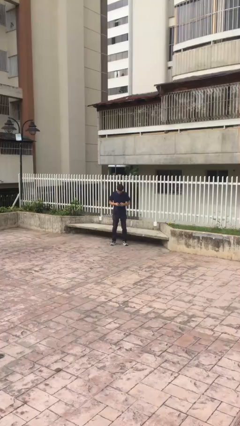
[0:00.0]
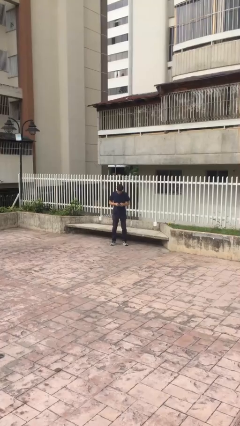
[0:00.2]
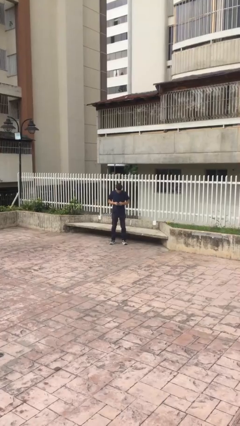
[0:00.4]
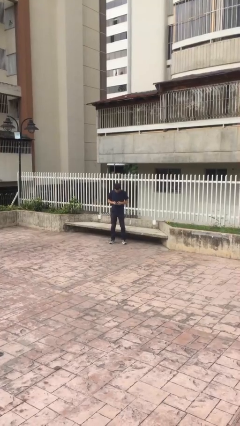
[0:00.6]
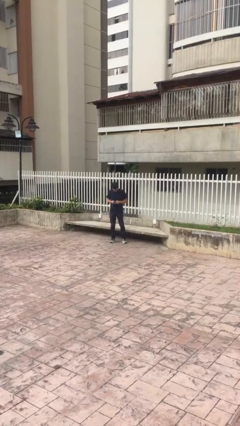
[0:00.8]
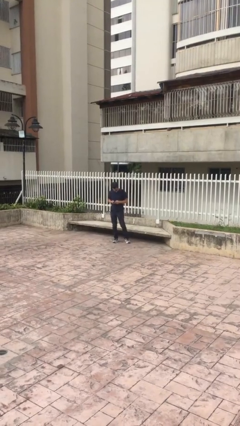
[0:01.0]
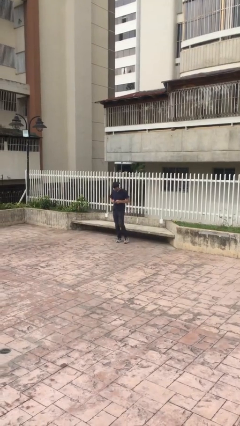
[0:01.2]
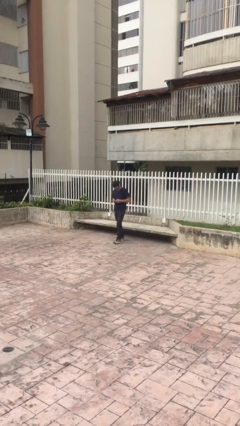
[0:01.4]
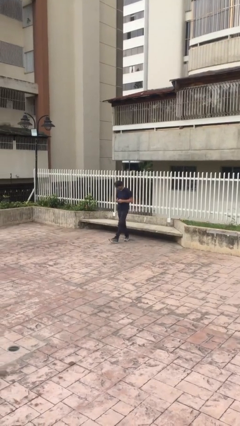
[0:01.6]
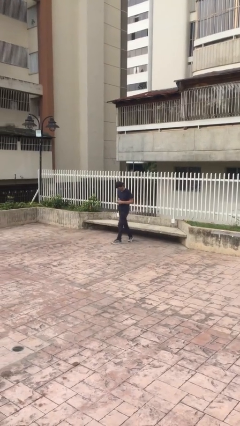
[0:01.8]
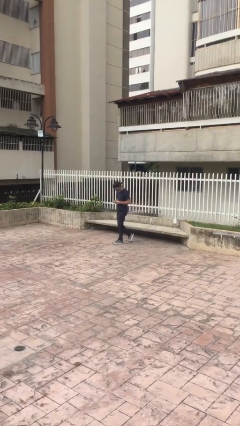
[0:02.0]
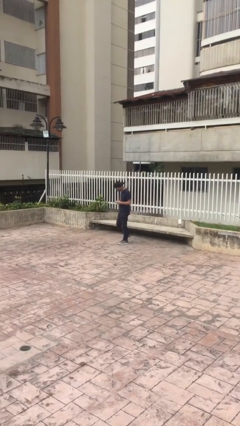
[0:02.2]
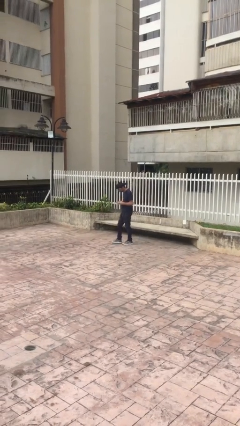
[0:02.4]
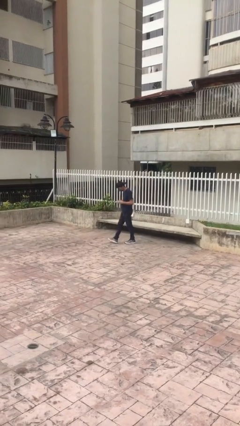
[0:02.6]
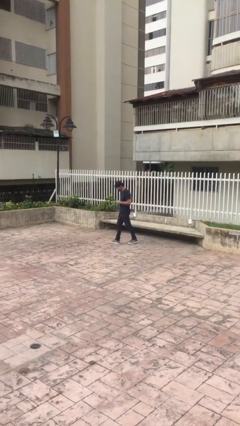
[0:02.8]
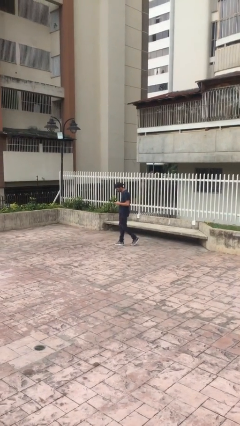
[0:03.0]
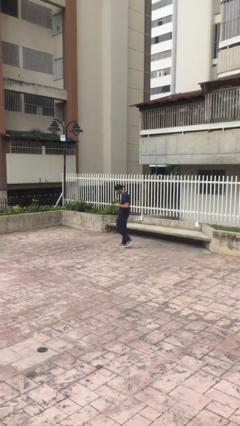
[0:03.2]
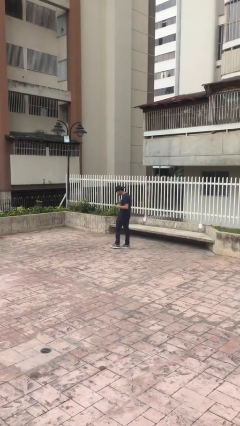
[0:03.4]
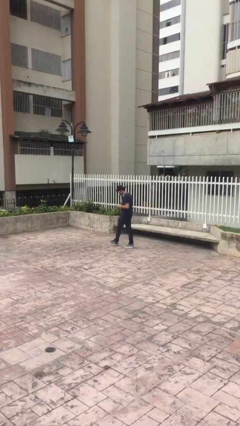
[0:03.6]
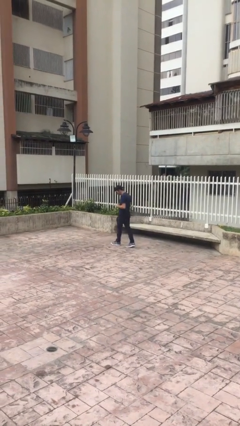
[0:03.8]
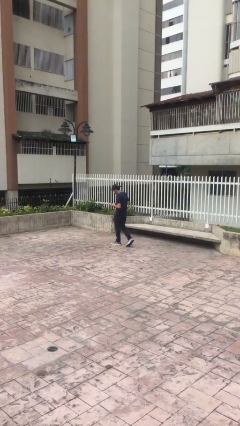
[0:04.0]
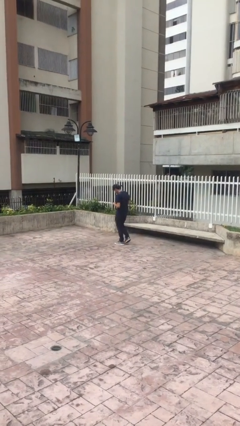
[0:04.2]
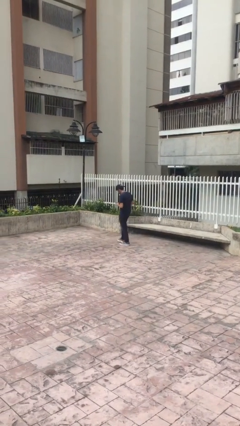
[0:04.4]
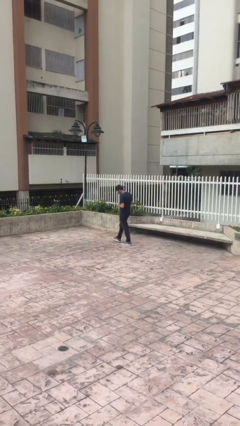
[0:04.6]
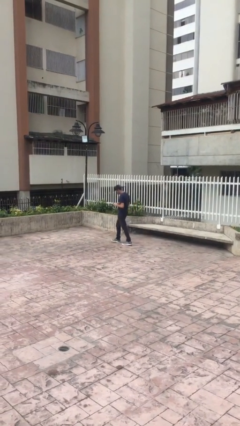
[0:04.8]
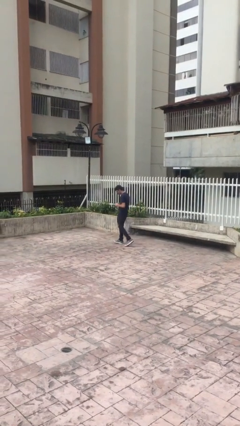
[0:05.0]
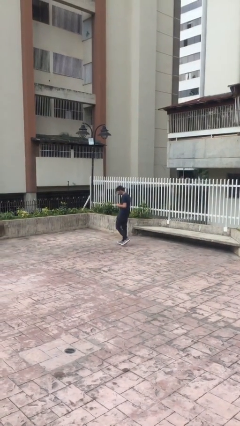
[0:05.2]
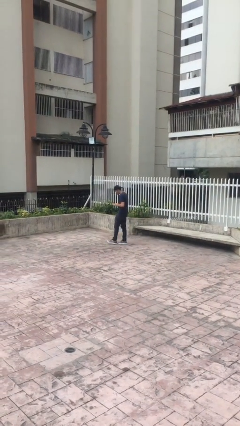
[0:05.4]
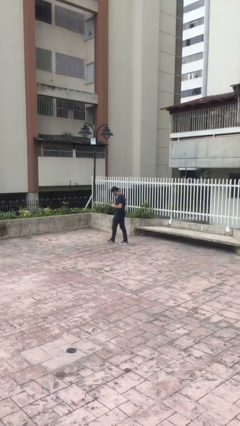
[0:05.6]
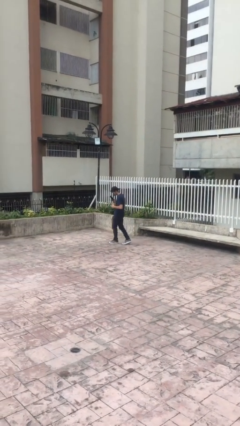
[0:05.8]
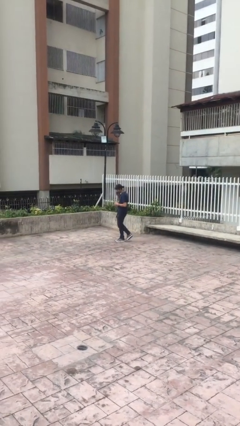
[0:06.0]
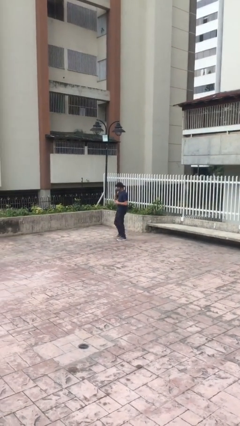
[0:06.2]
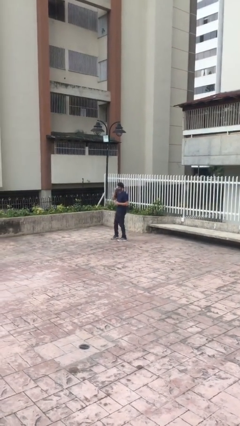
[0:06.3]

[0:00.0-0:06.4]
person texts on phone

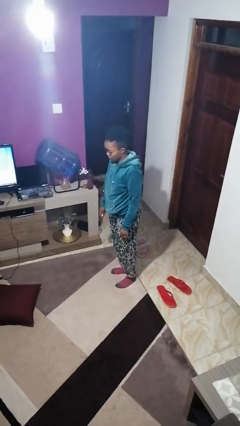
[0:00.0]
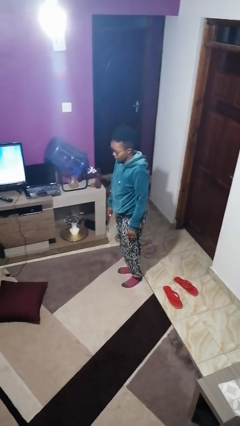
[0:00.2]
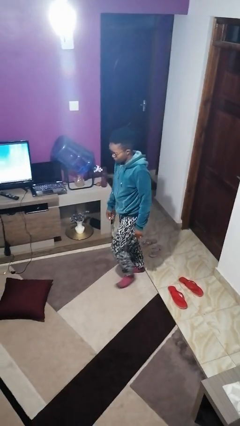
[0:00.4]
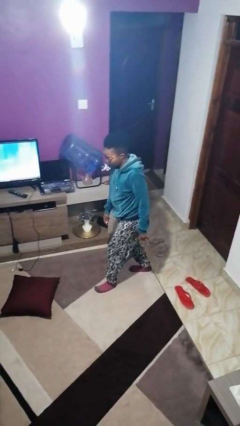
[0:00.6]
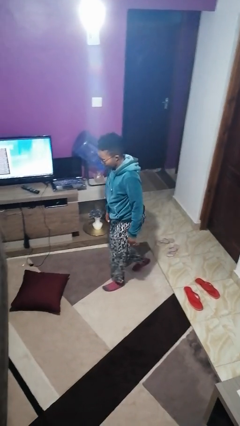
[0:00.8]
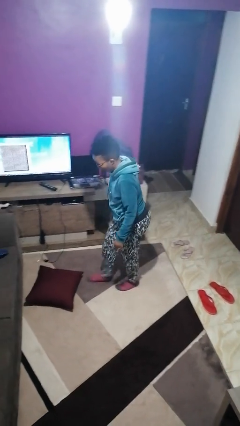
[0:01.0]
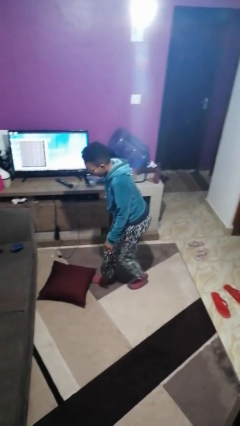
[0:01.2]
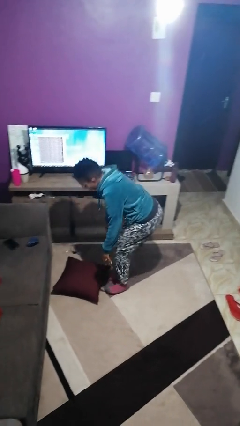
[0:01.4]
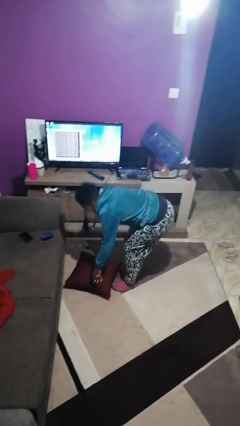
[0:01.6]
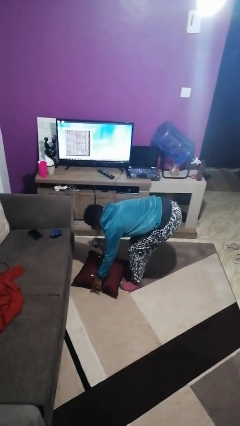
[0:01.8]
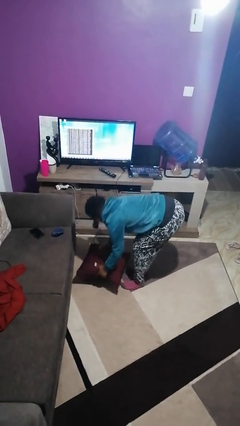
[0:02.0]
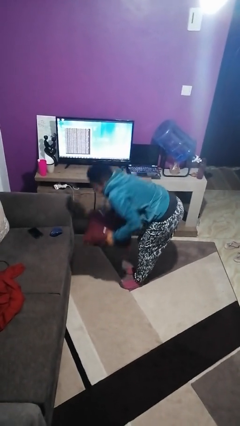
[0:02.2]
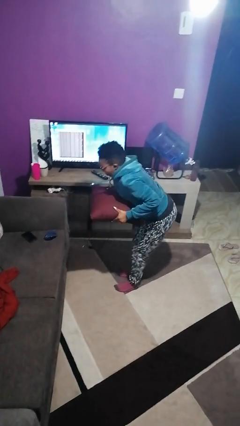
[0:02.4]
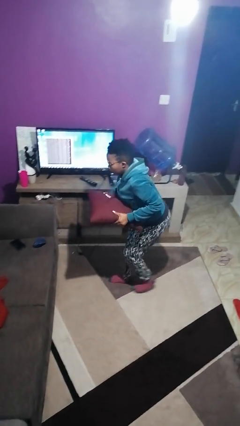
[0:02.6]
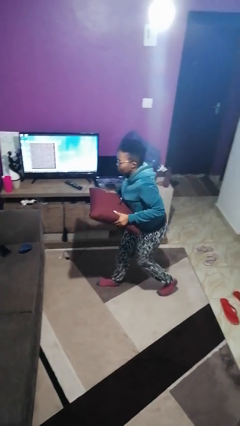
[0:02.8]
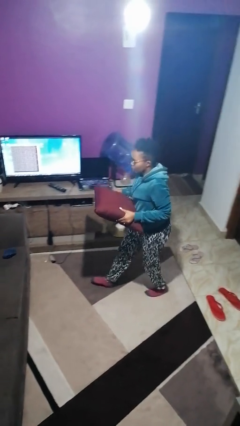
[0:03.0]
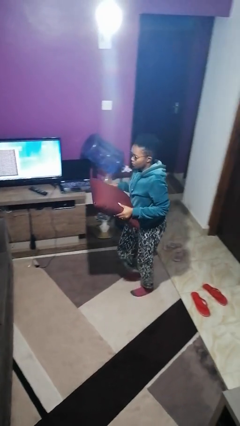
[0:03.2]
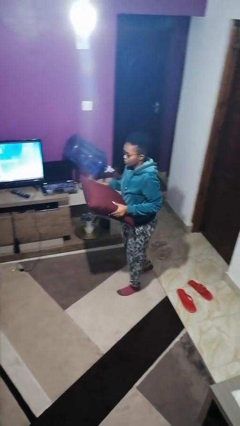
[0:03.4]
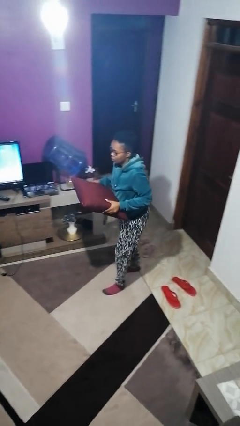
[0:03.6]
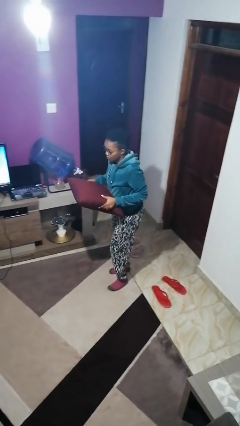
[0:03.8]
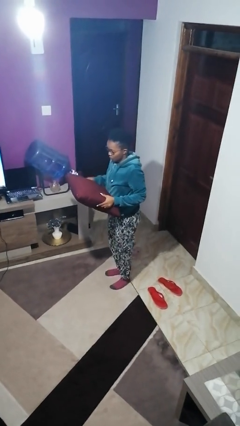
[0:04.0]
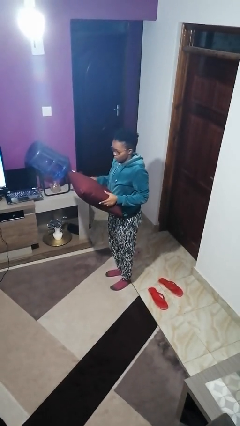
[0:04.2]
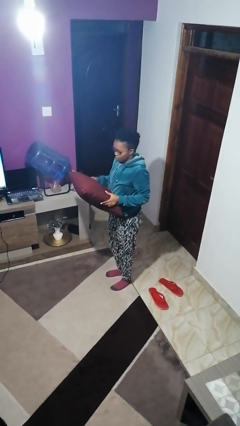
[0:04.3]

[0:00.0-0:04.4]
person picks up object from floor

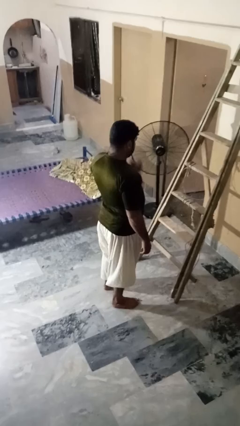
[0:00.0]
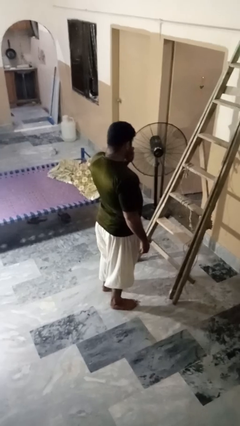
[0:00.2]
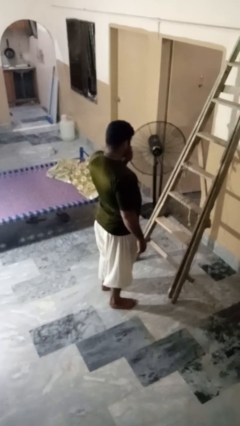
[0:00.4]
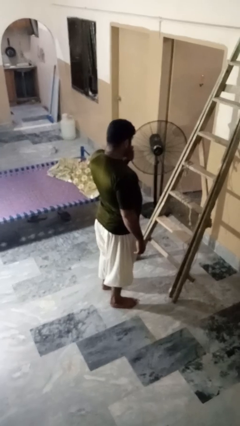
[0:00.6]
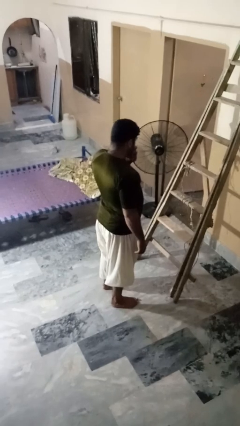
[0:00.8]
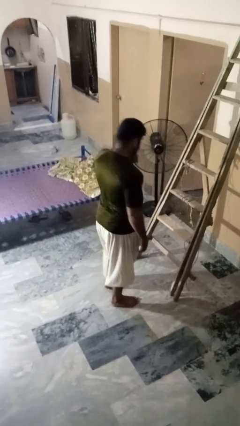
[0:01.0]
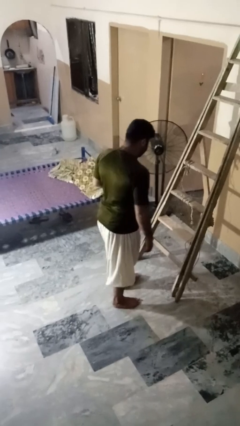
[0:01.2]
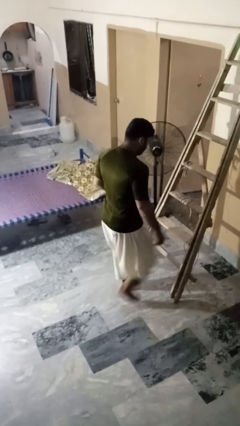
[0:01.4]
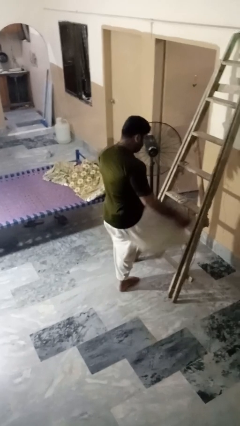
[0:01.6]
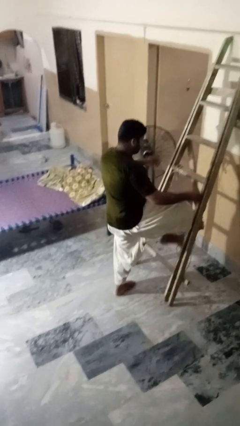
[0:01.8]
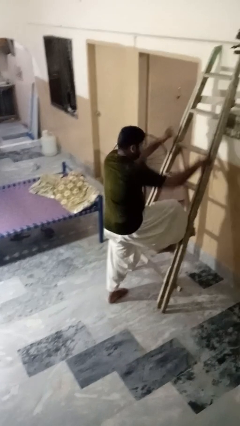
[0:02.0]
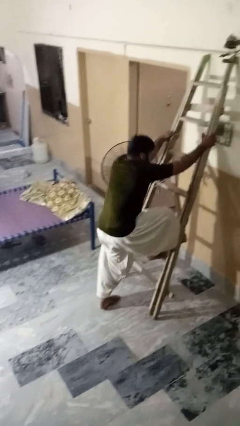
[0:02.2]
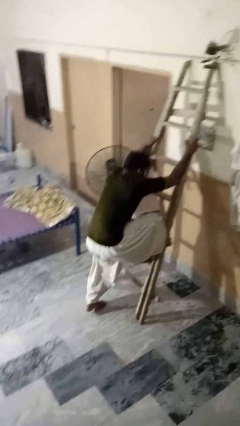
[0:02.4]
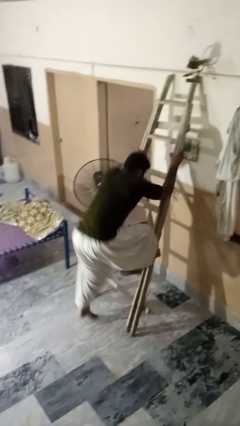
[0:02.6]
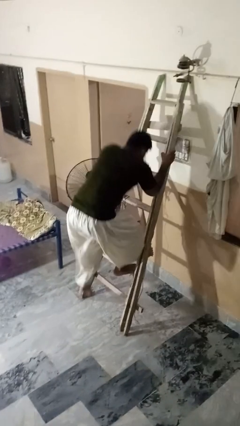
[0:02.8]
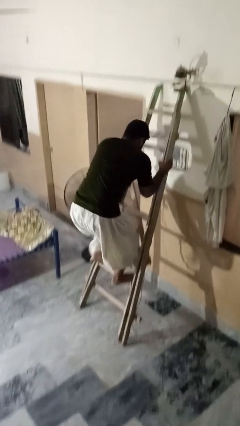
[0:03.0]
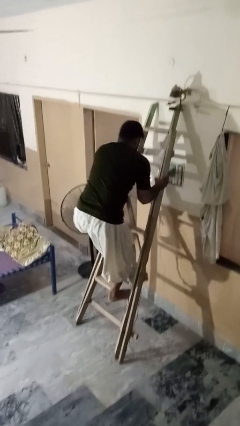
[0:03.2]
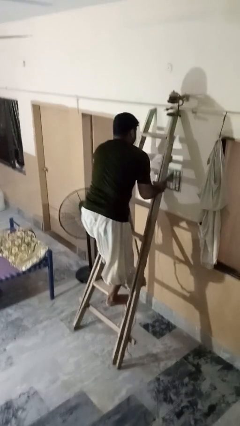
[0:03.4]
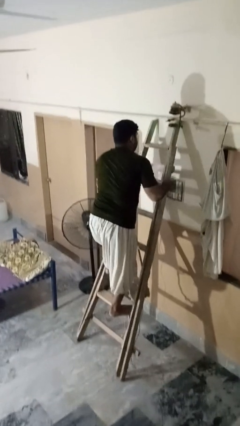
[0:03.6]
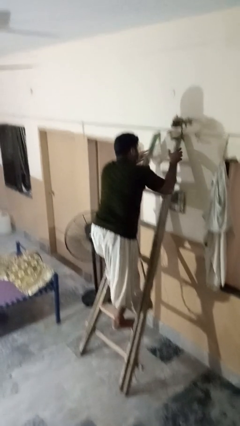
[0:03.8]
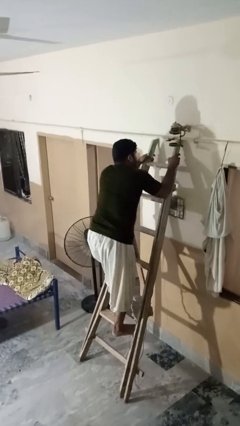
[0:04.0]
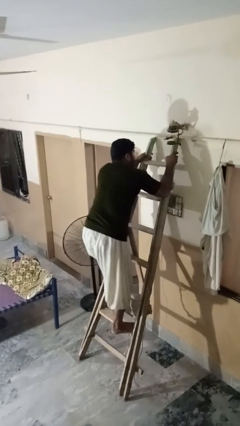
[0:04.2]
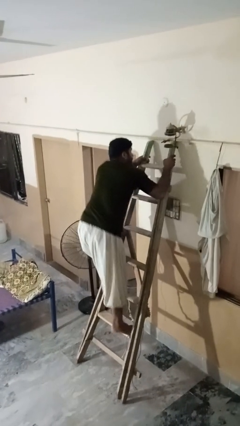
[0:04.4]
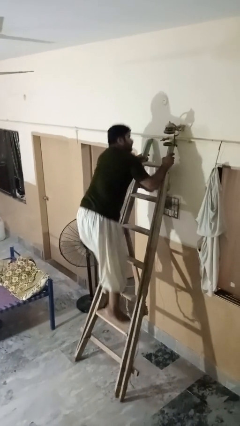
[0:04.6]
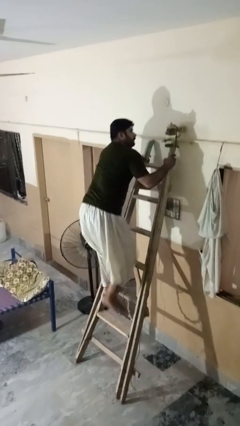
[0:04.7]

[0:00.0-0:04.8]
person climbs up ladder

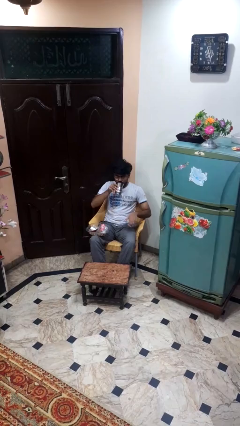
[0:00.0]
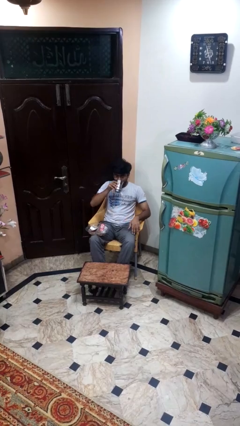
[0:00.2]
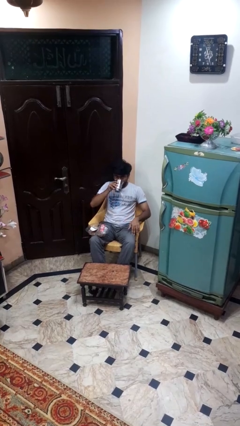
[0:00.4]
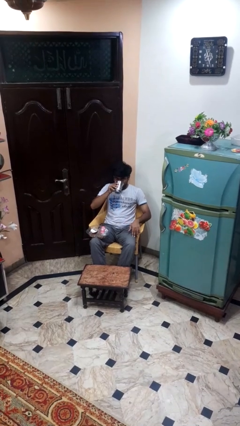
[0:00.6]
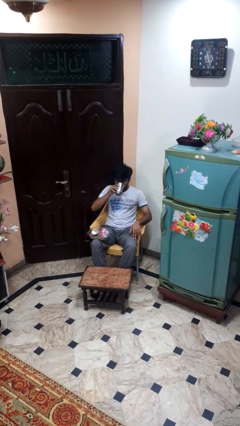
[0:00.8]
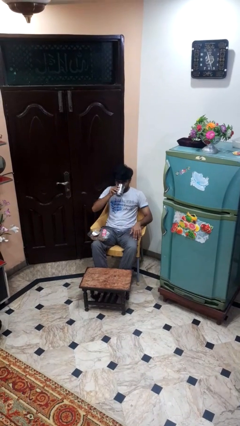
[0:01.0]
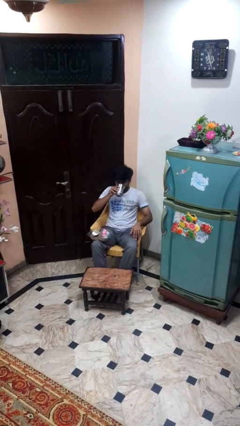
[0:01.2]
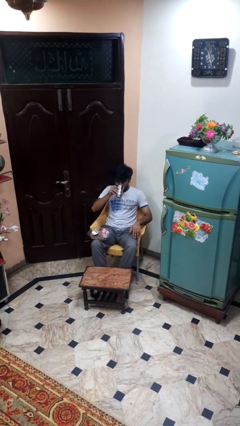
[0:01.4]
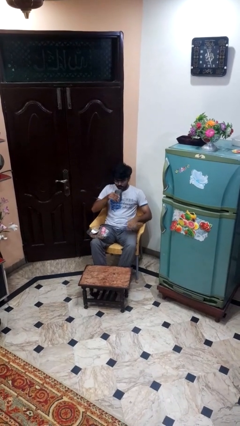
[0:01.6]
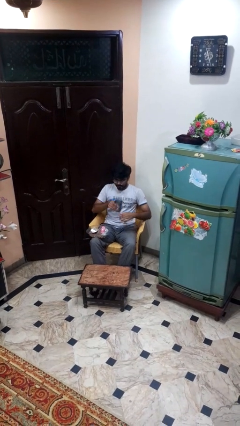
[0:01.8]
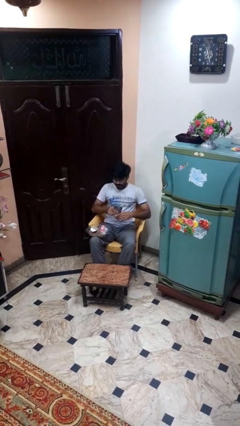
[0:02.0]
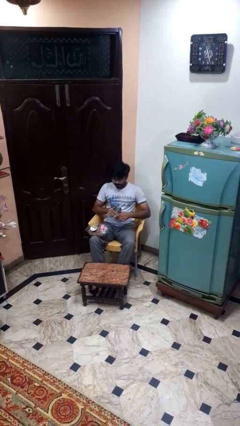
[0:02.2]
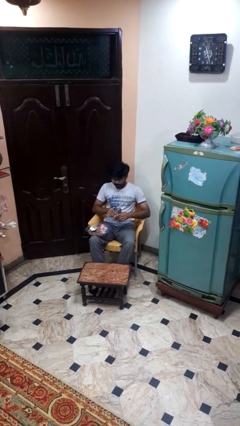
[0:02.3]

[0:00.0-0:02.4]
person drinks from cup
